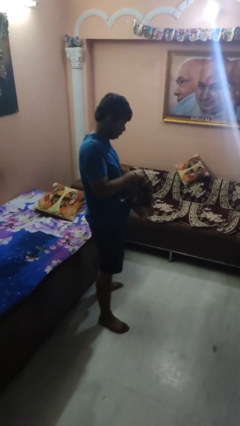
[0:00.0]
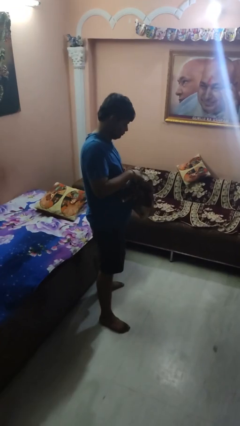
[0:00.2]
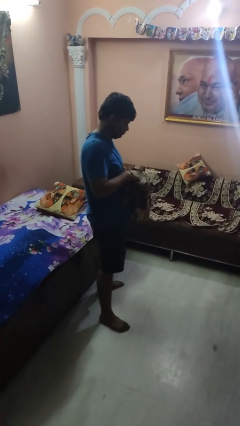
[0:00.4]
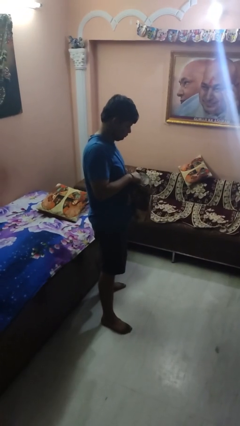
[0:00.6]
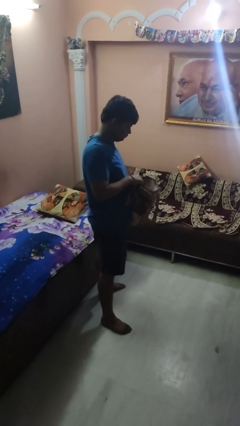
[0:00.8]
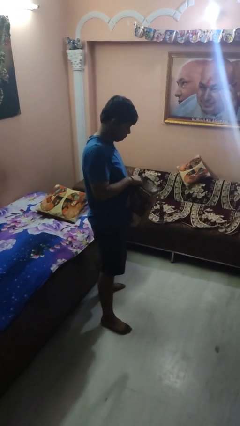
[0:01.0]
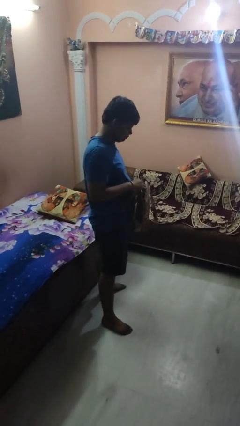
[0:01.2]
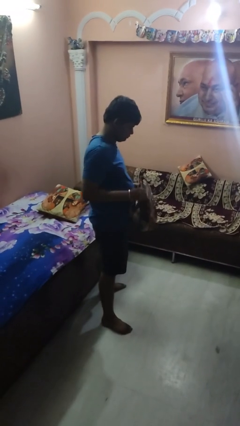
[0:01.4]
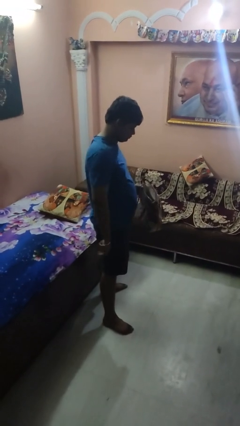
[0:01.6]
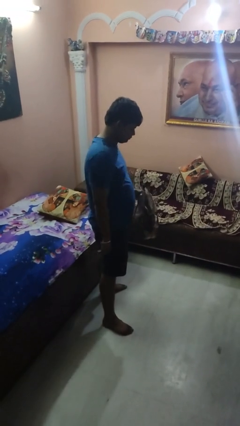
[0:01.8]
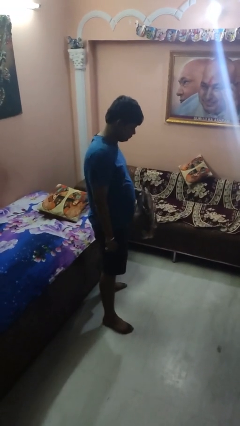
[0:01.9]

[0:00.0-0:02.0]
person puts object into purse

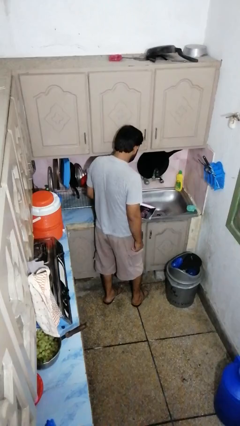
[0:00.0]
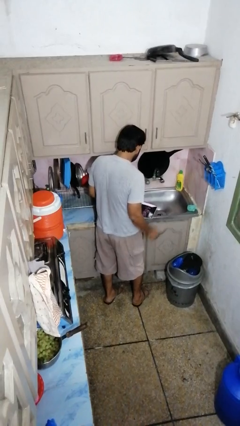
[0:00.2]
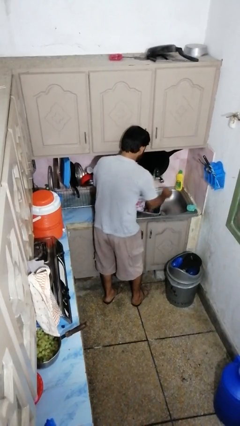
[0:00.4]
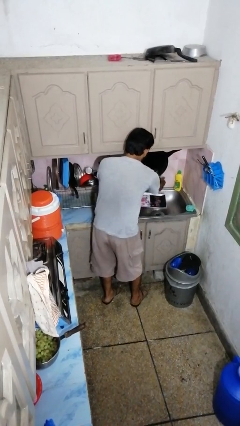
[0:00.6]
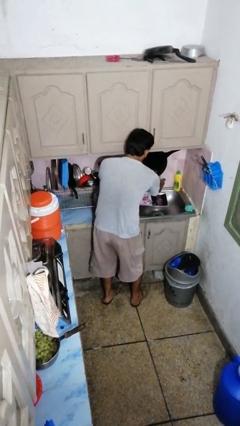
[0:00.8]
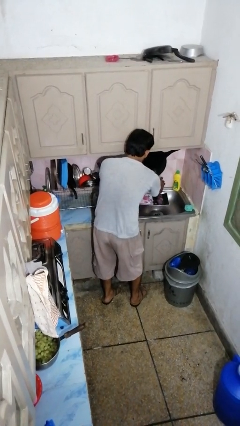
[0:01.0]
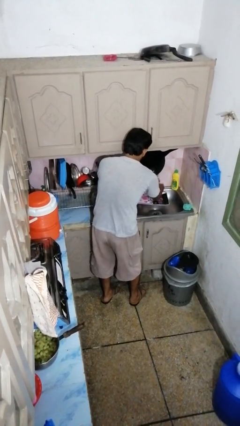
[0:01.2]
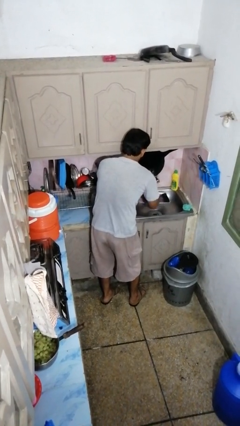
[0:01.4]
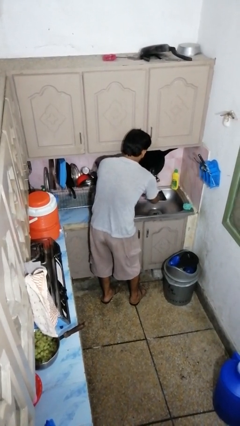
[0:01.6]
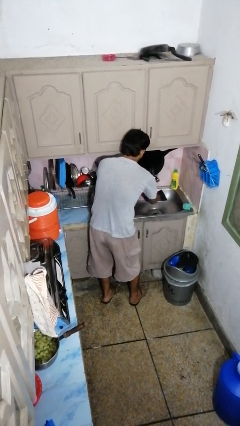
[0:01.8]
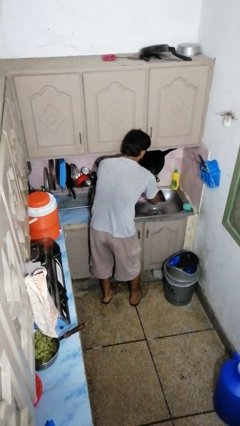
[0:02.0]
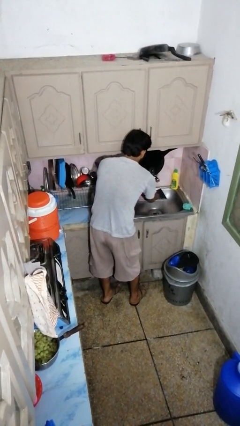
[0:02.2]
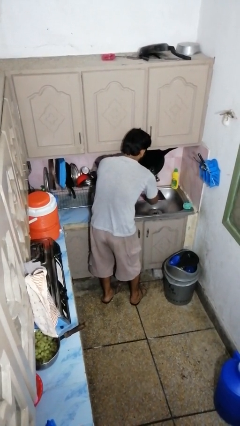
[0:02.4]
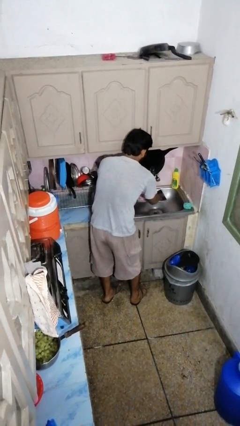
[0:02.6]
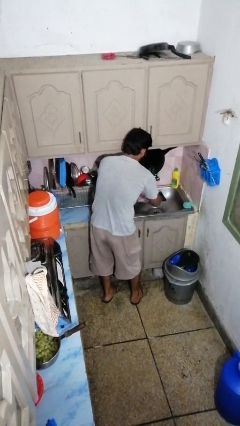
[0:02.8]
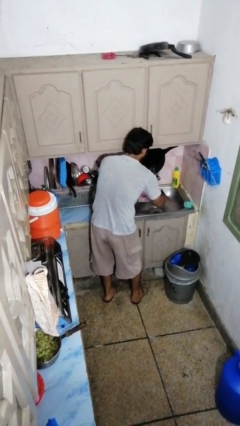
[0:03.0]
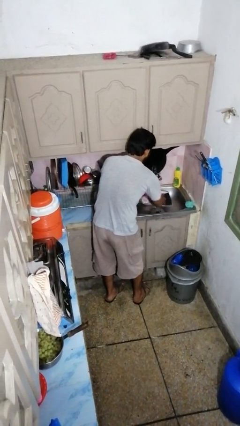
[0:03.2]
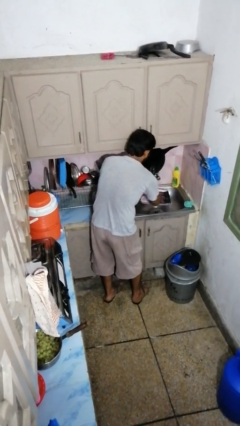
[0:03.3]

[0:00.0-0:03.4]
person washes dish

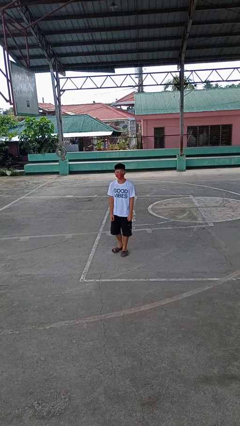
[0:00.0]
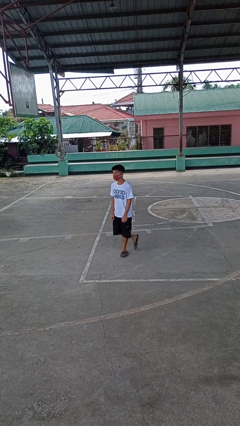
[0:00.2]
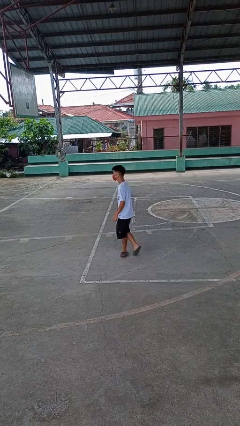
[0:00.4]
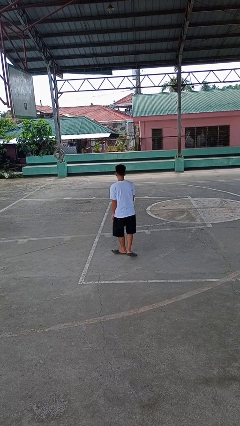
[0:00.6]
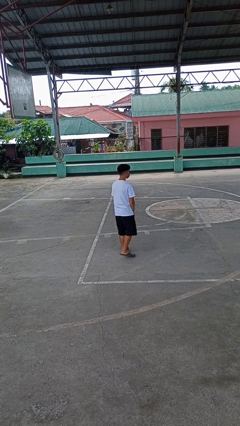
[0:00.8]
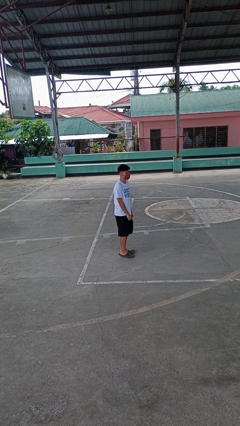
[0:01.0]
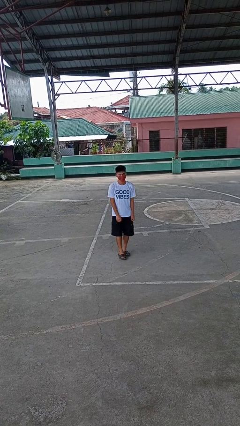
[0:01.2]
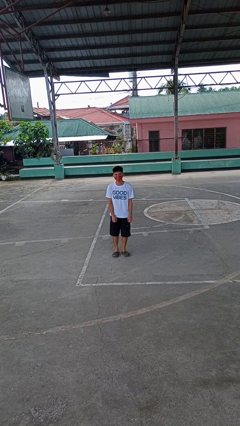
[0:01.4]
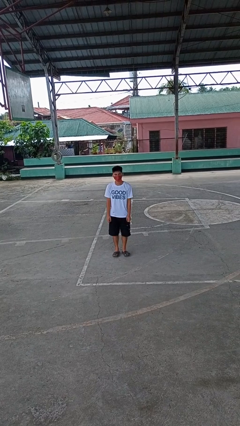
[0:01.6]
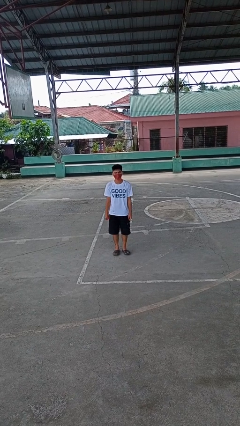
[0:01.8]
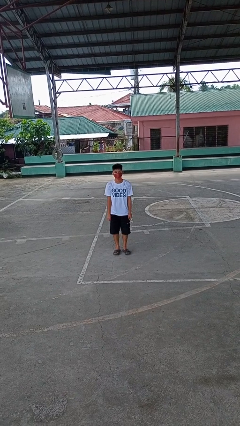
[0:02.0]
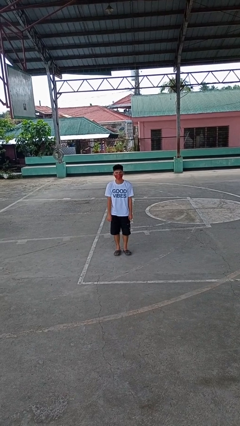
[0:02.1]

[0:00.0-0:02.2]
person twirls

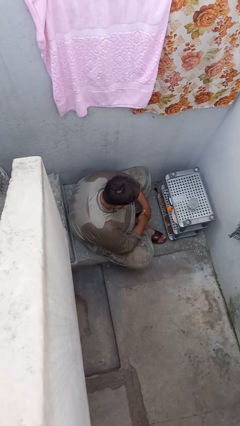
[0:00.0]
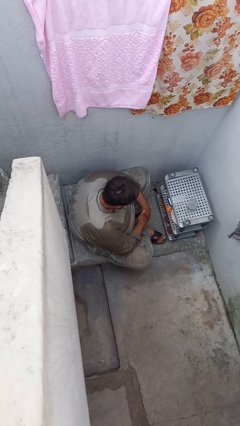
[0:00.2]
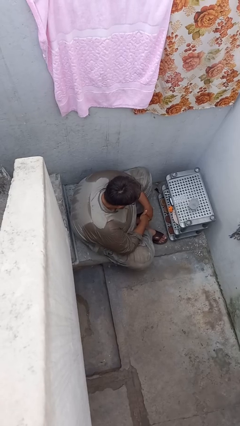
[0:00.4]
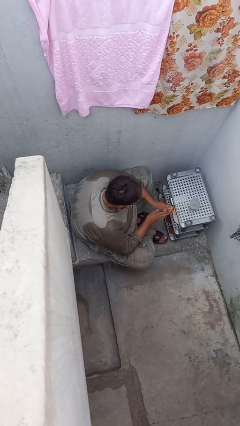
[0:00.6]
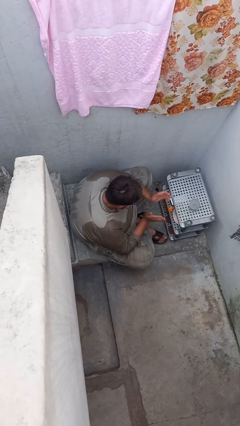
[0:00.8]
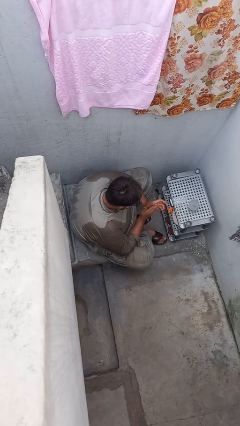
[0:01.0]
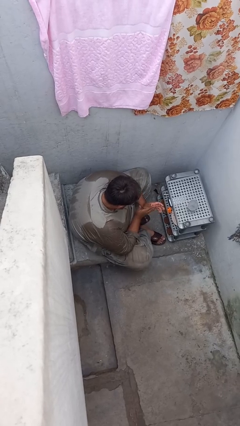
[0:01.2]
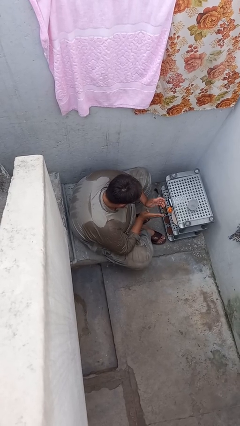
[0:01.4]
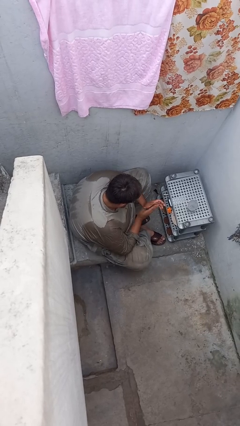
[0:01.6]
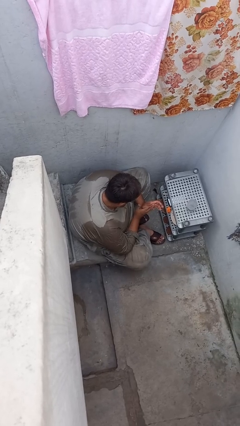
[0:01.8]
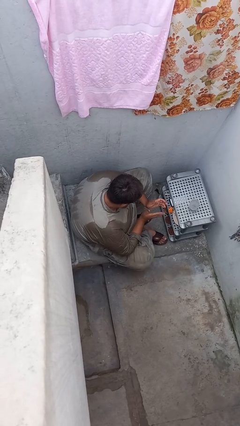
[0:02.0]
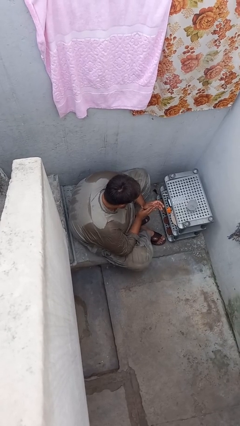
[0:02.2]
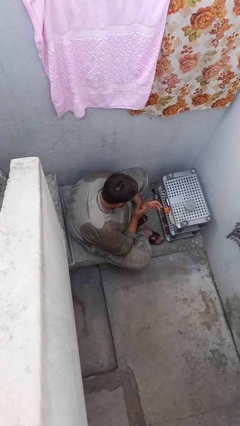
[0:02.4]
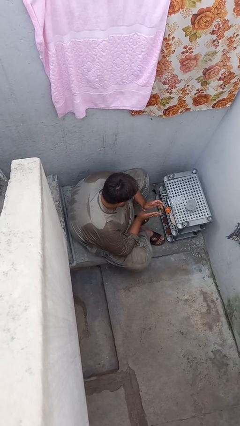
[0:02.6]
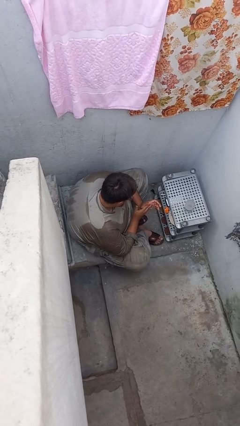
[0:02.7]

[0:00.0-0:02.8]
person claps hands

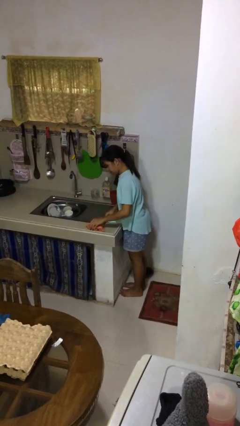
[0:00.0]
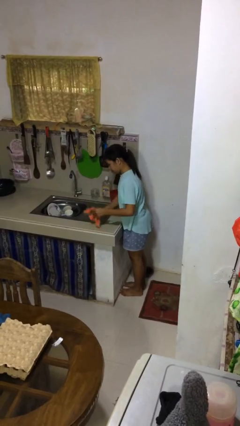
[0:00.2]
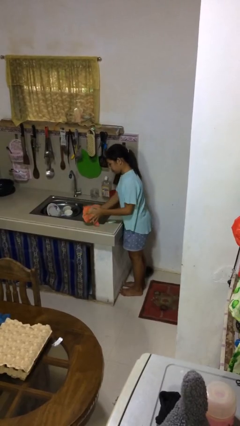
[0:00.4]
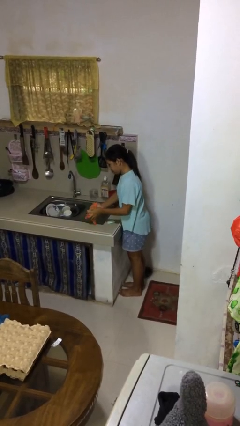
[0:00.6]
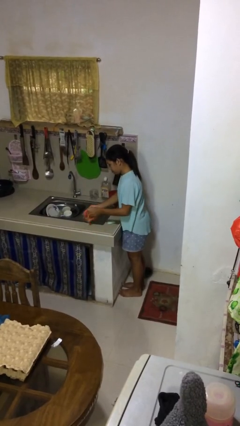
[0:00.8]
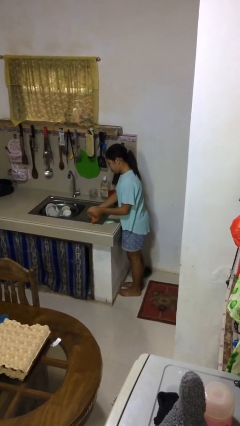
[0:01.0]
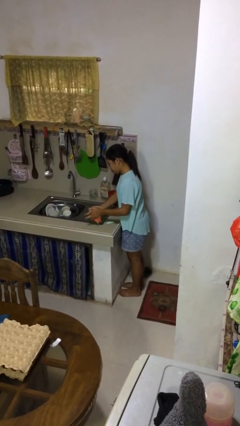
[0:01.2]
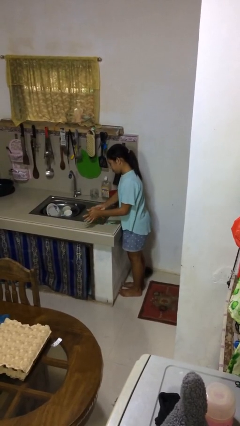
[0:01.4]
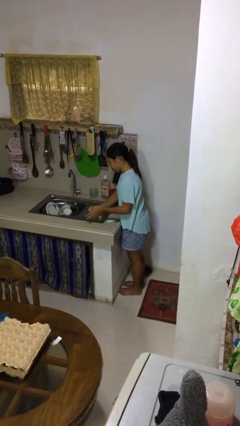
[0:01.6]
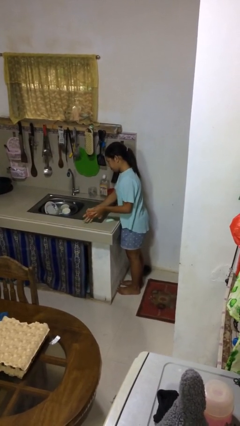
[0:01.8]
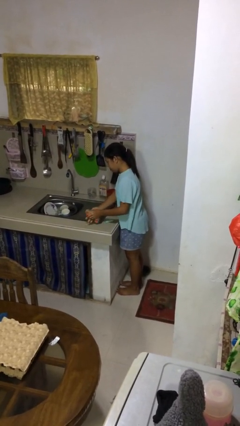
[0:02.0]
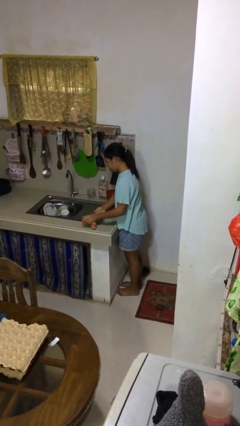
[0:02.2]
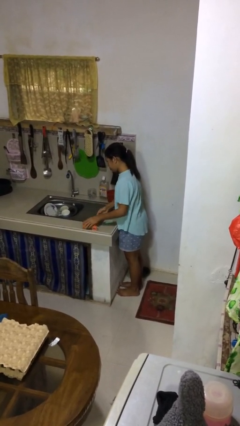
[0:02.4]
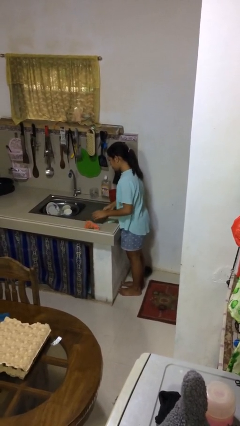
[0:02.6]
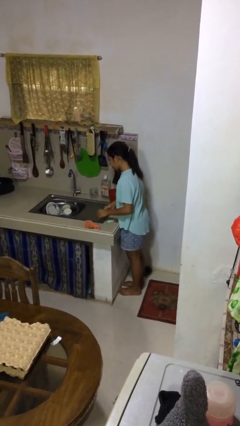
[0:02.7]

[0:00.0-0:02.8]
person dries hands with towel

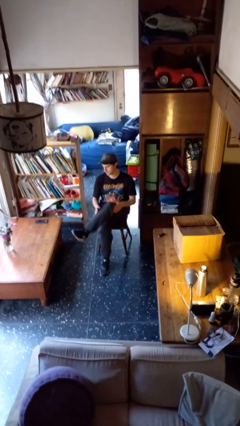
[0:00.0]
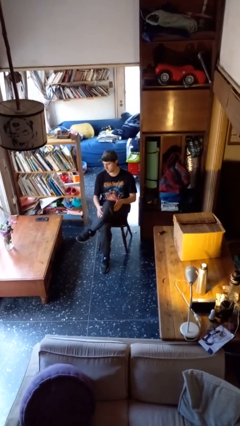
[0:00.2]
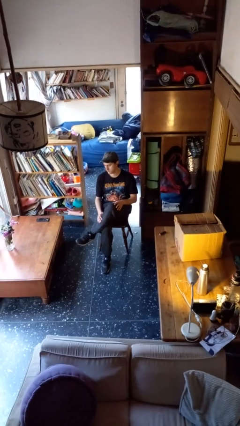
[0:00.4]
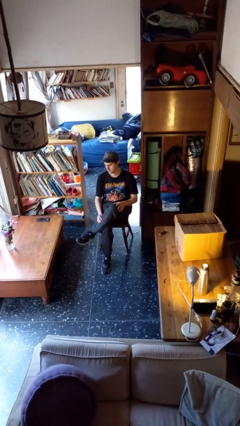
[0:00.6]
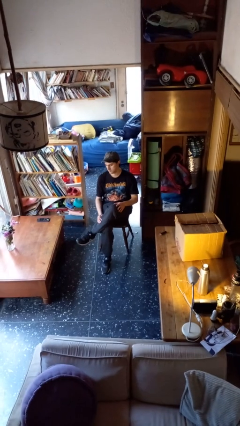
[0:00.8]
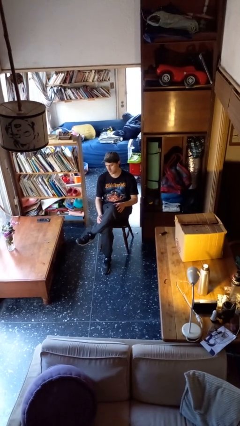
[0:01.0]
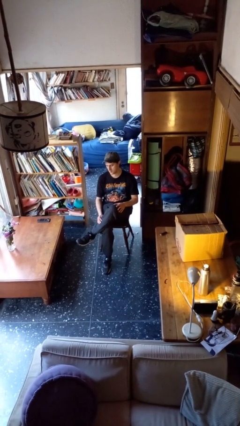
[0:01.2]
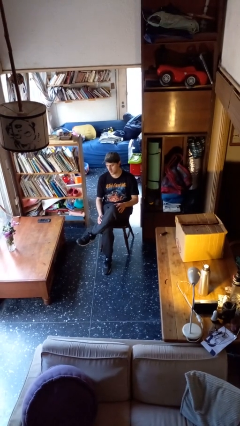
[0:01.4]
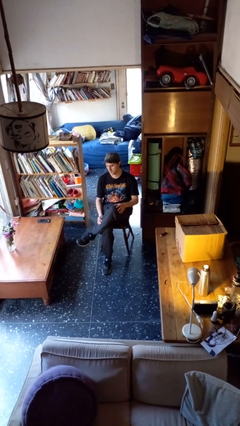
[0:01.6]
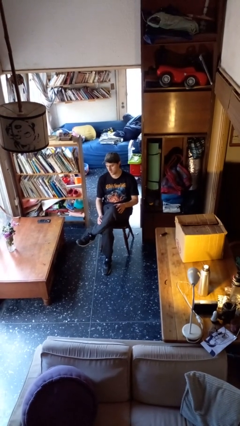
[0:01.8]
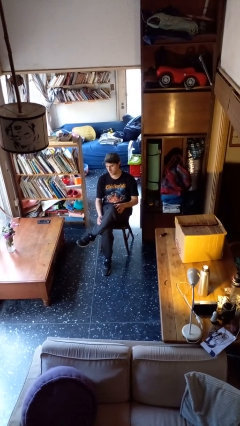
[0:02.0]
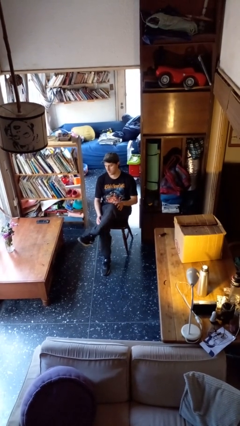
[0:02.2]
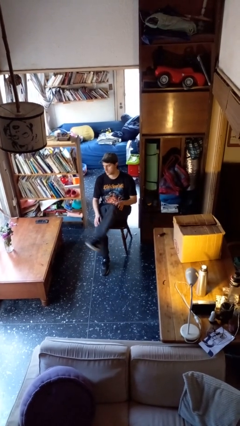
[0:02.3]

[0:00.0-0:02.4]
person crosses legs

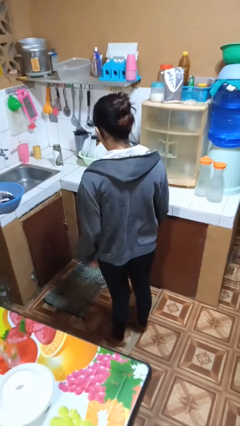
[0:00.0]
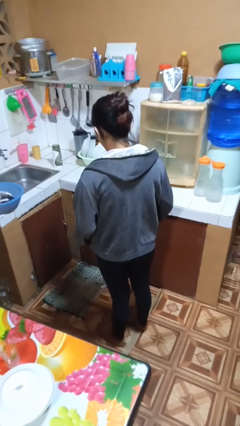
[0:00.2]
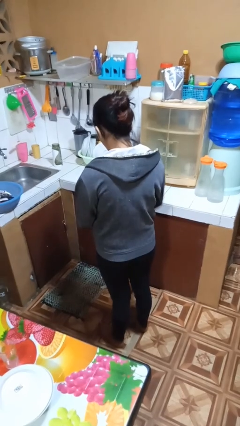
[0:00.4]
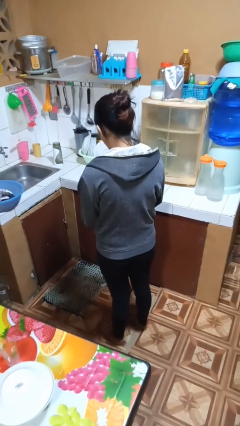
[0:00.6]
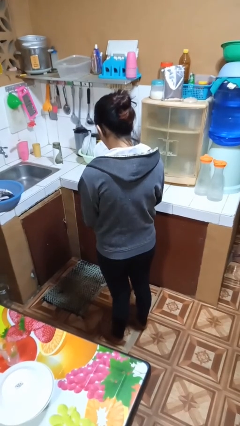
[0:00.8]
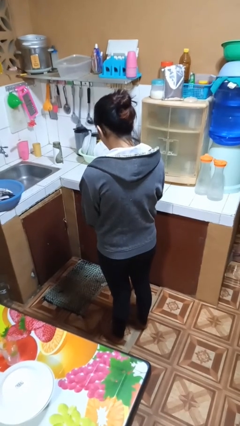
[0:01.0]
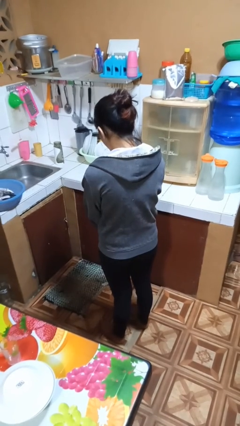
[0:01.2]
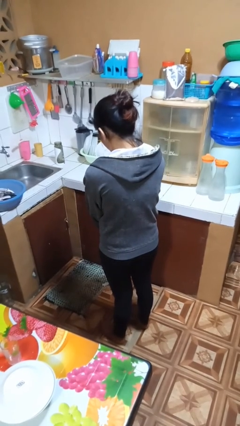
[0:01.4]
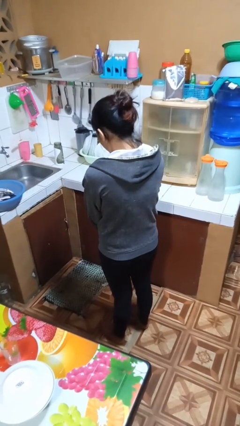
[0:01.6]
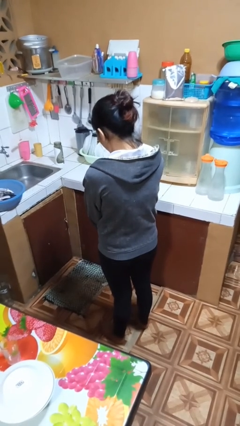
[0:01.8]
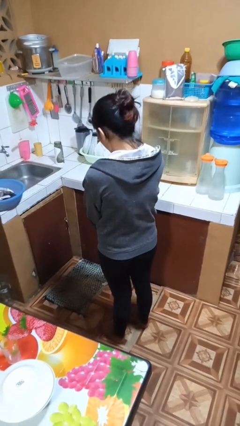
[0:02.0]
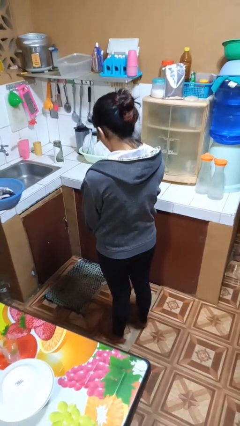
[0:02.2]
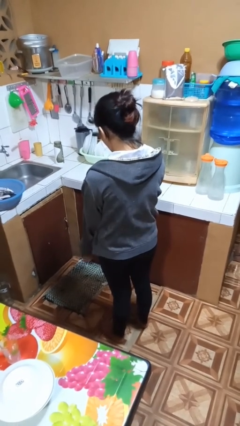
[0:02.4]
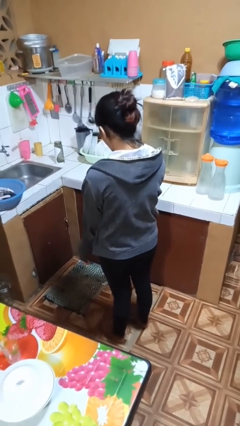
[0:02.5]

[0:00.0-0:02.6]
person zips up jacket
